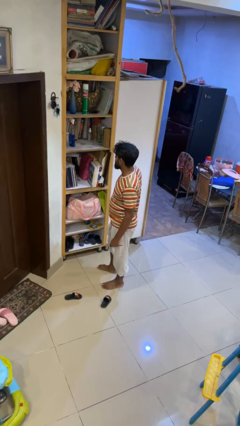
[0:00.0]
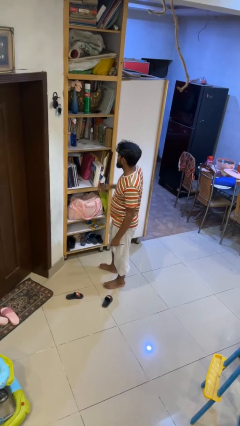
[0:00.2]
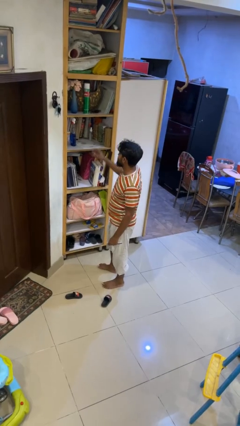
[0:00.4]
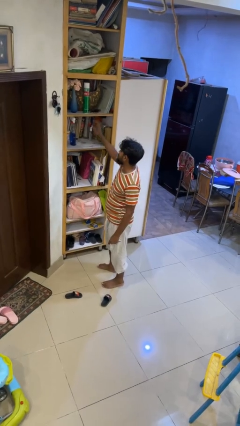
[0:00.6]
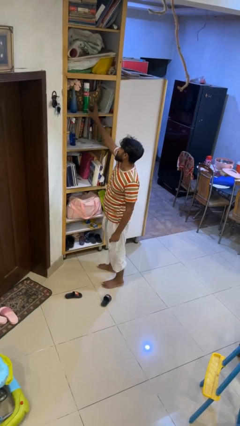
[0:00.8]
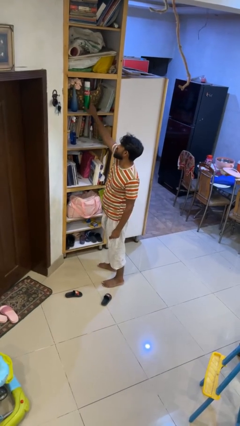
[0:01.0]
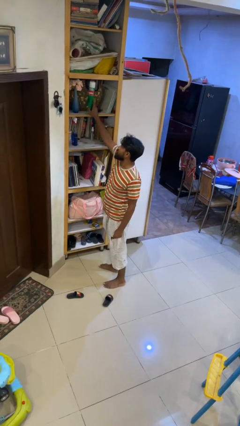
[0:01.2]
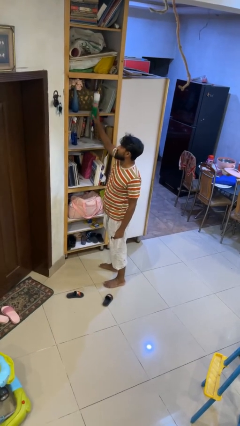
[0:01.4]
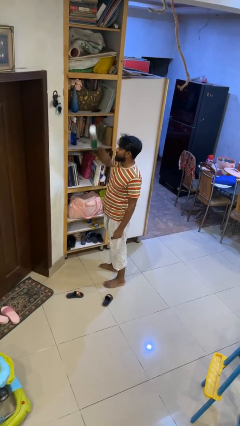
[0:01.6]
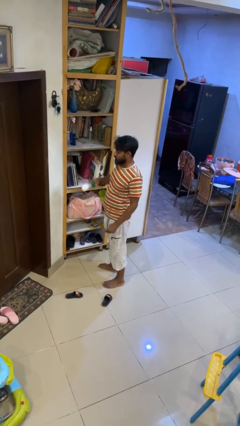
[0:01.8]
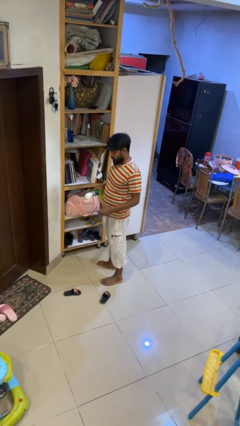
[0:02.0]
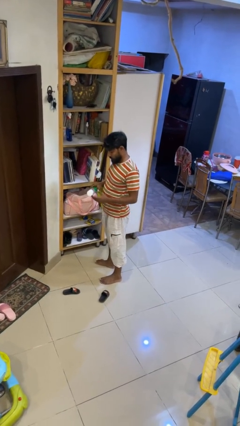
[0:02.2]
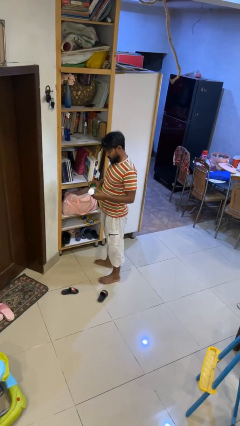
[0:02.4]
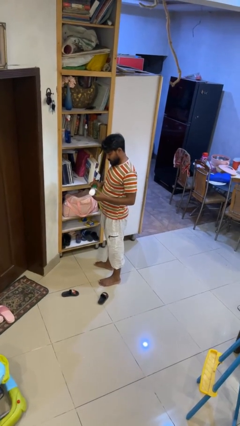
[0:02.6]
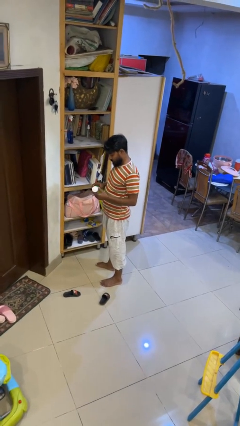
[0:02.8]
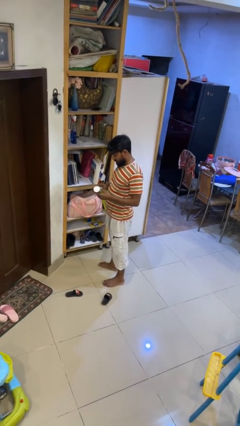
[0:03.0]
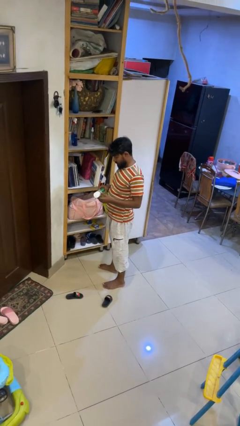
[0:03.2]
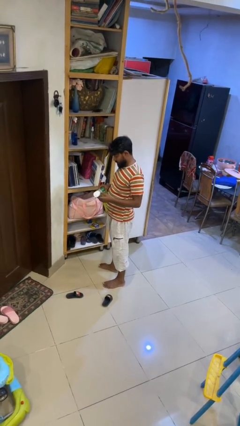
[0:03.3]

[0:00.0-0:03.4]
person picks up object from shelf

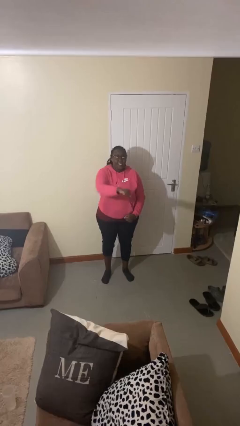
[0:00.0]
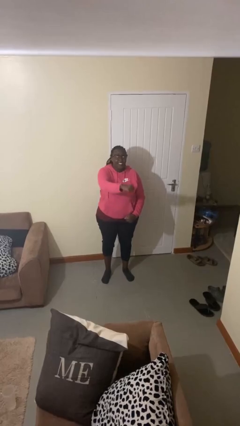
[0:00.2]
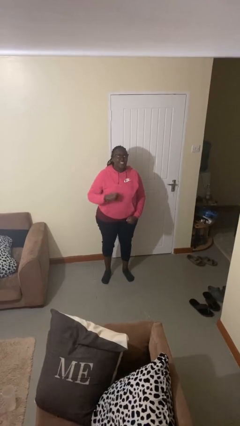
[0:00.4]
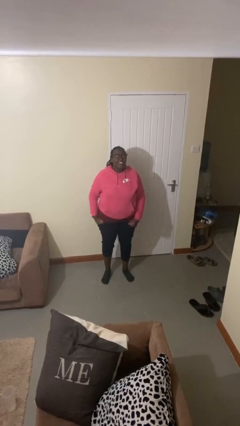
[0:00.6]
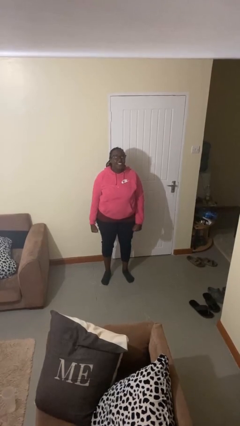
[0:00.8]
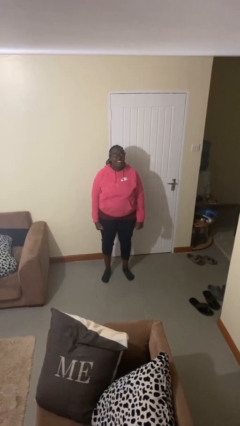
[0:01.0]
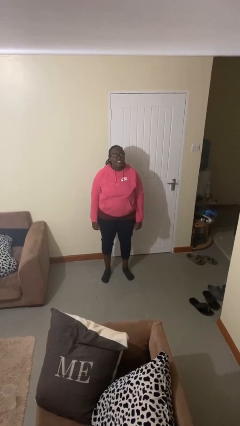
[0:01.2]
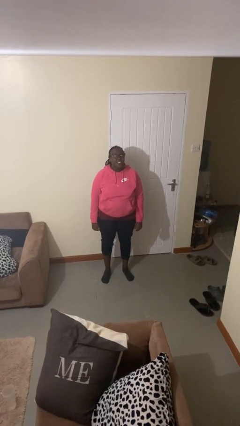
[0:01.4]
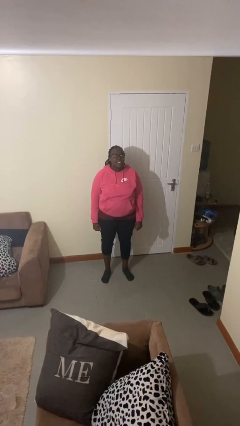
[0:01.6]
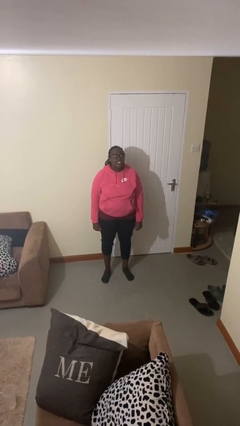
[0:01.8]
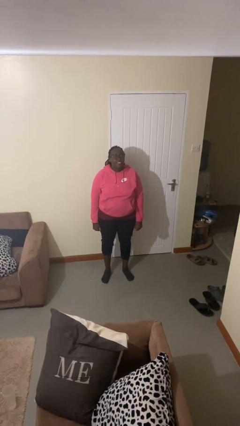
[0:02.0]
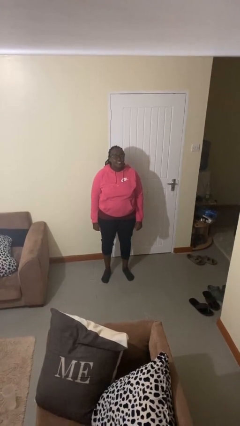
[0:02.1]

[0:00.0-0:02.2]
person punches

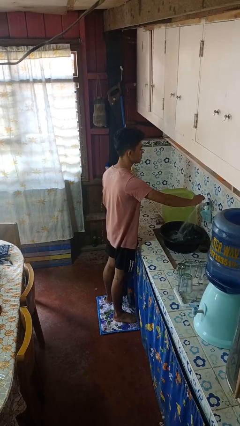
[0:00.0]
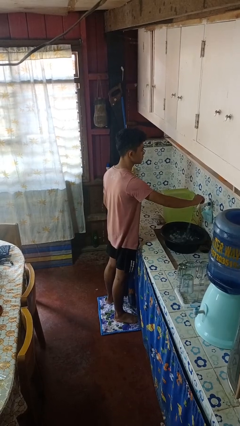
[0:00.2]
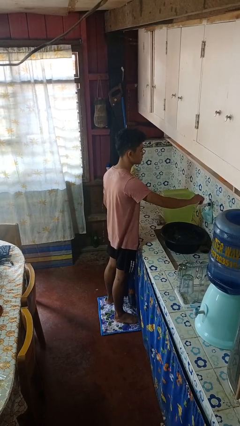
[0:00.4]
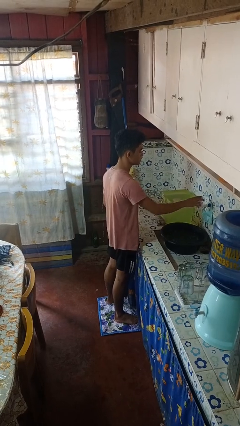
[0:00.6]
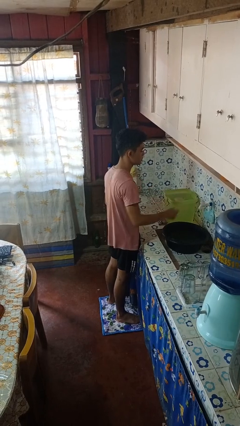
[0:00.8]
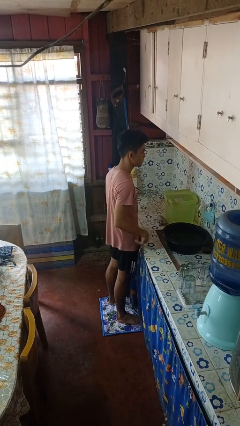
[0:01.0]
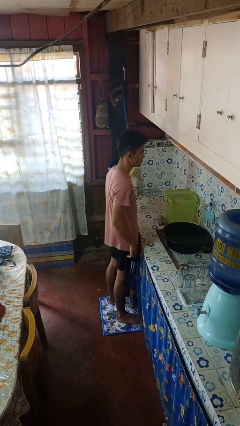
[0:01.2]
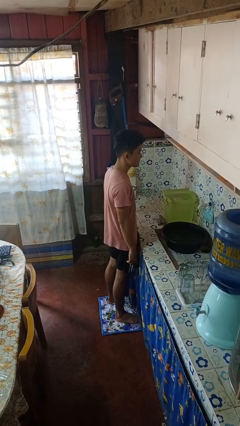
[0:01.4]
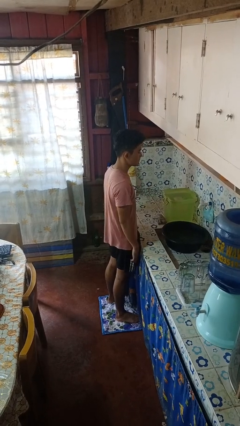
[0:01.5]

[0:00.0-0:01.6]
person turns off faucet

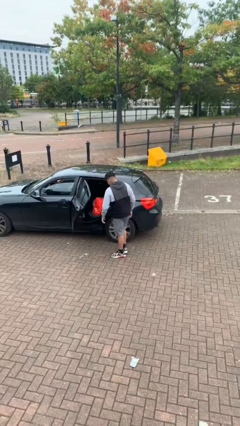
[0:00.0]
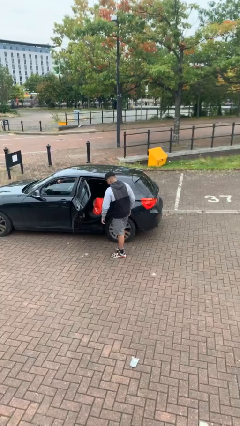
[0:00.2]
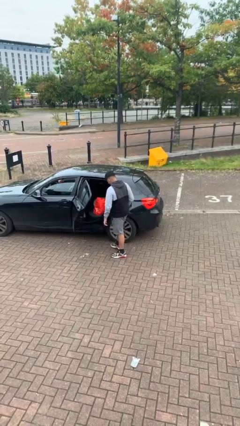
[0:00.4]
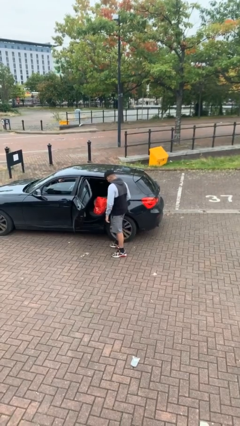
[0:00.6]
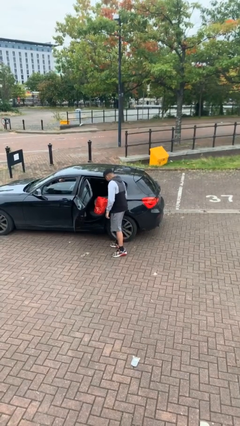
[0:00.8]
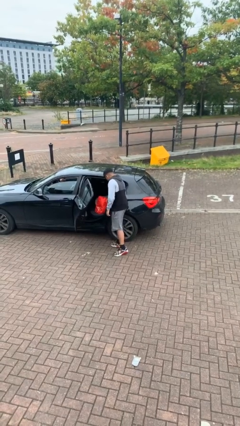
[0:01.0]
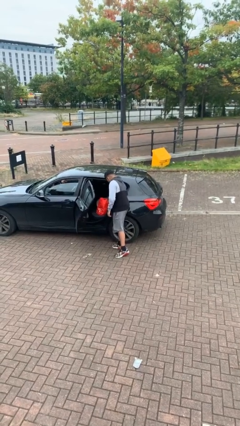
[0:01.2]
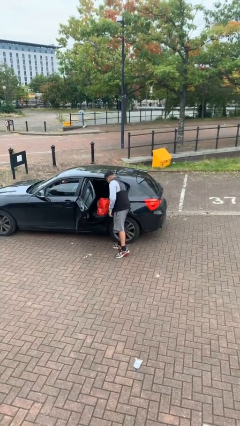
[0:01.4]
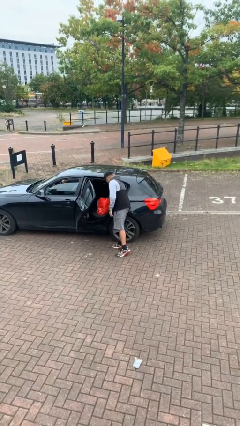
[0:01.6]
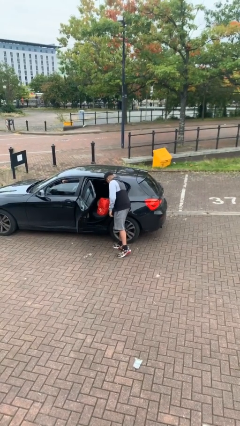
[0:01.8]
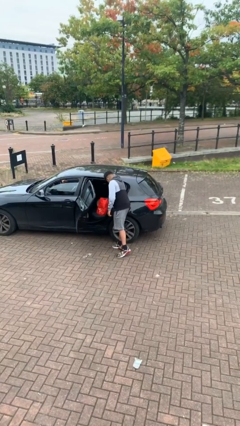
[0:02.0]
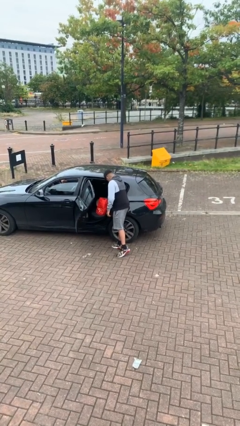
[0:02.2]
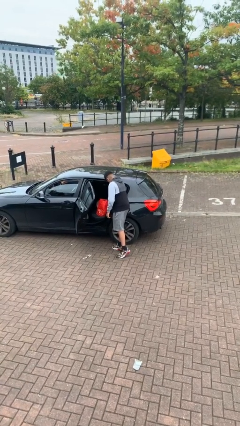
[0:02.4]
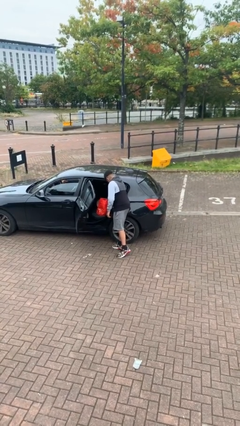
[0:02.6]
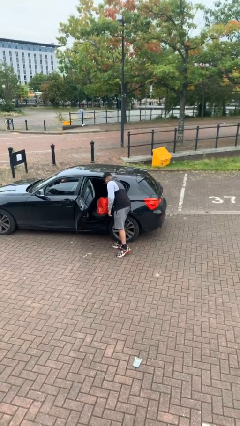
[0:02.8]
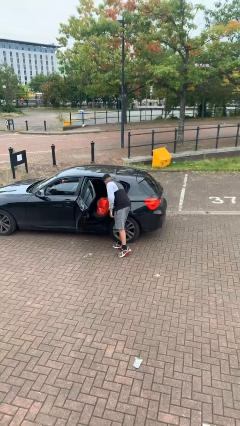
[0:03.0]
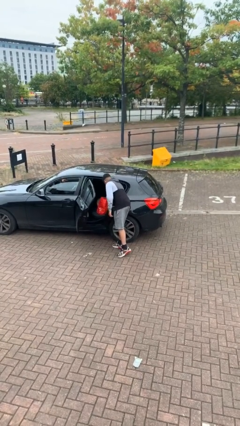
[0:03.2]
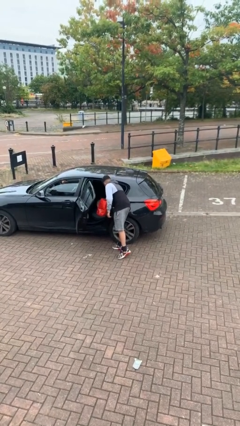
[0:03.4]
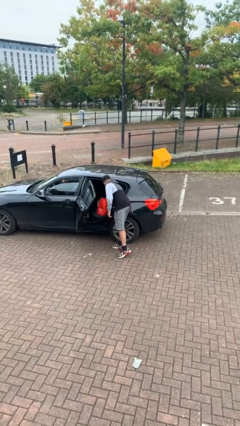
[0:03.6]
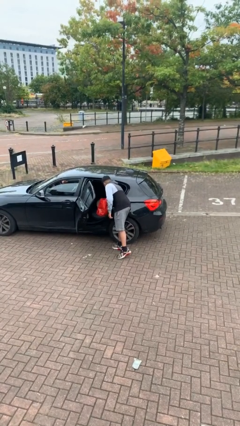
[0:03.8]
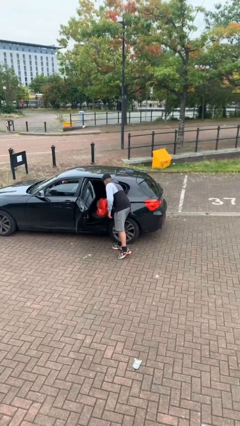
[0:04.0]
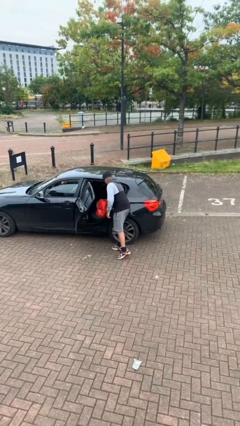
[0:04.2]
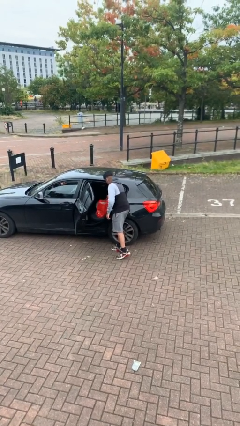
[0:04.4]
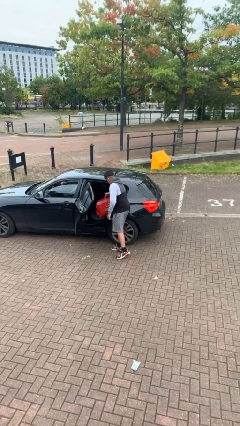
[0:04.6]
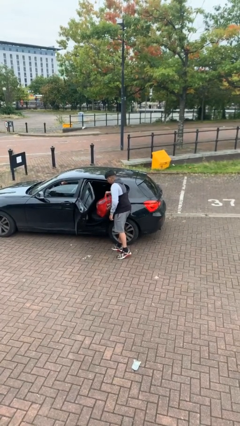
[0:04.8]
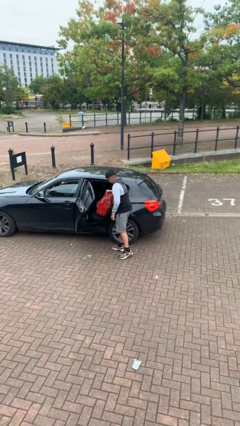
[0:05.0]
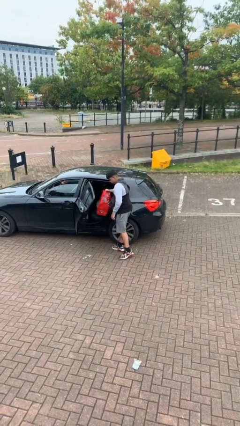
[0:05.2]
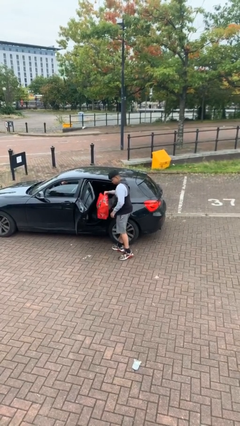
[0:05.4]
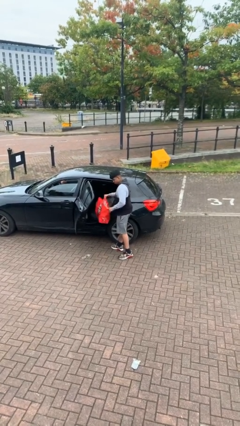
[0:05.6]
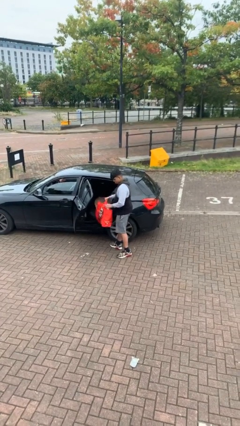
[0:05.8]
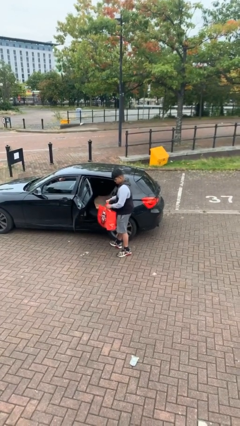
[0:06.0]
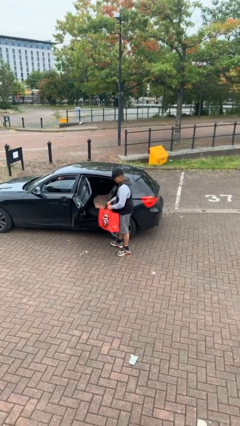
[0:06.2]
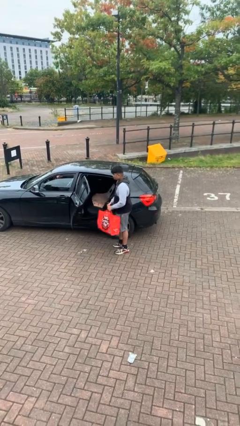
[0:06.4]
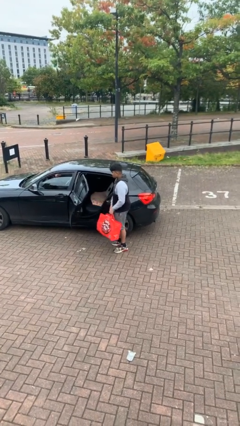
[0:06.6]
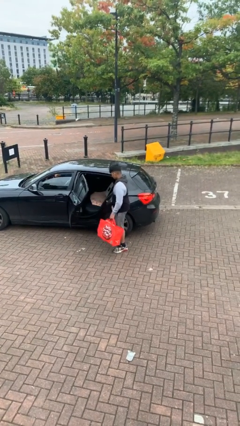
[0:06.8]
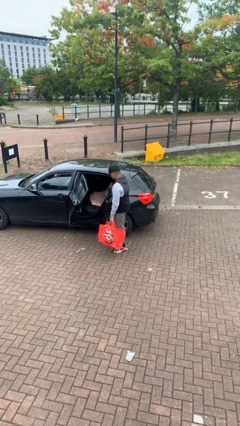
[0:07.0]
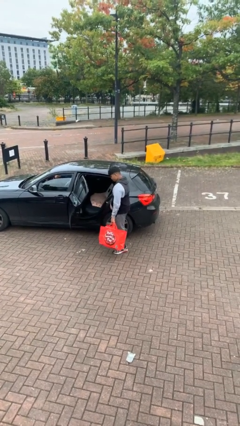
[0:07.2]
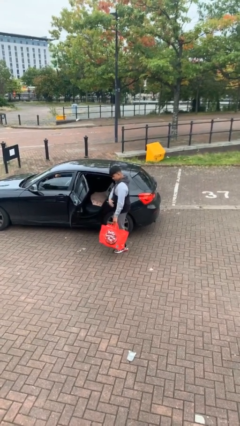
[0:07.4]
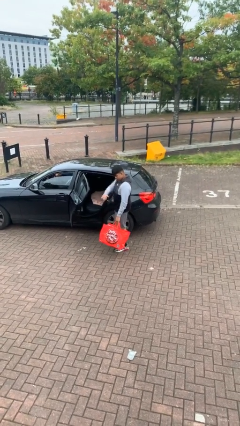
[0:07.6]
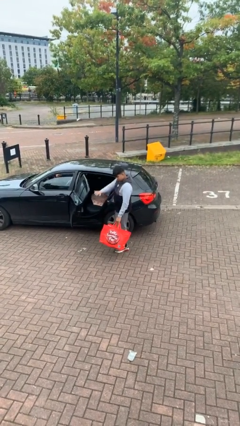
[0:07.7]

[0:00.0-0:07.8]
person unloads car

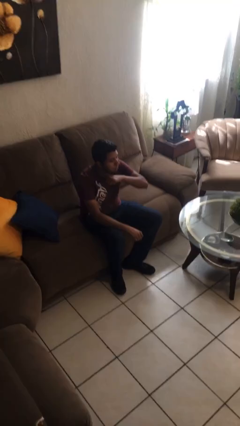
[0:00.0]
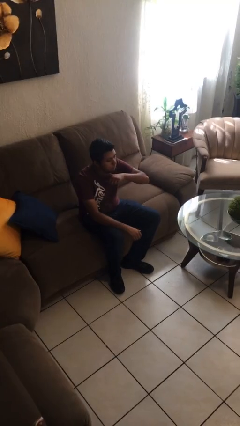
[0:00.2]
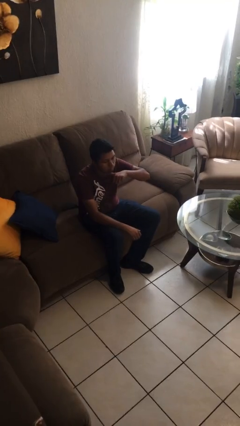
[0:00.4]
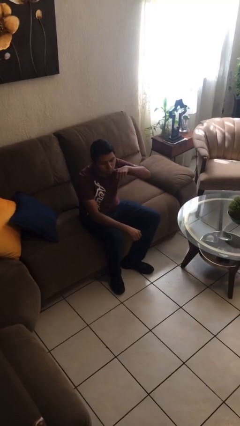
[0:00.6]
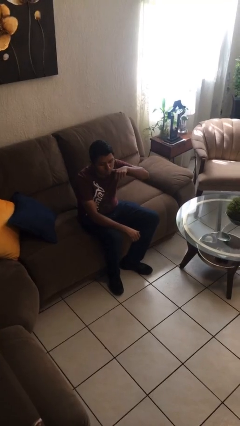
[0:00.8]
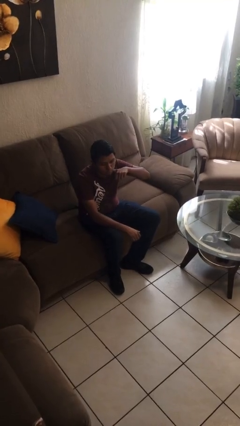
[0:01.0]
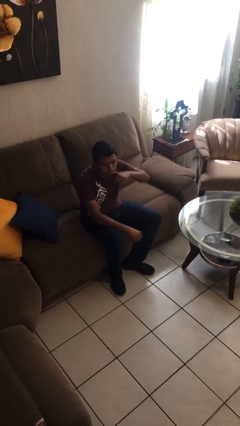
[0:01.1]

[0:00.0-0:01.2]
person gestures cut

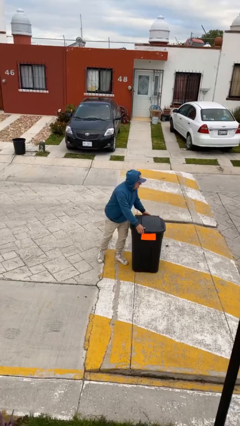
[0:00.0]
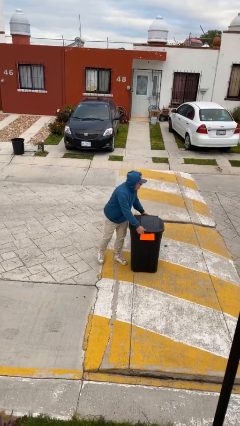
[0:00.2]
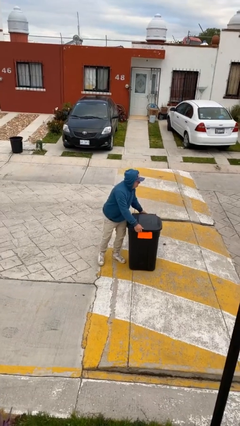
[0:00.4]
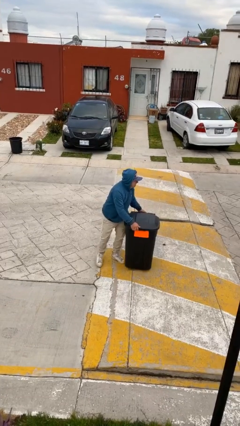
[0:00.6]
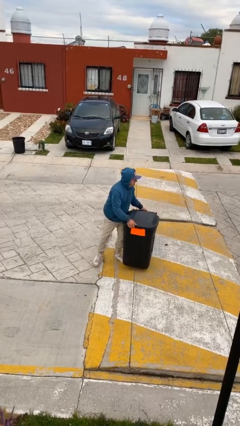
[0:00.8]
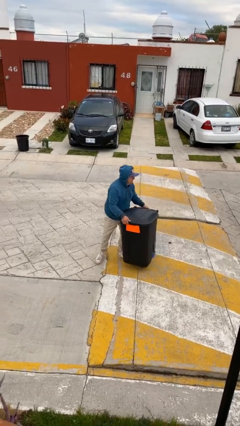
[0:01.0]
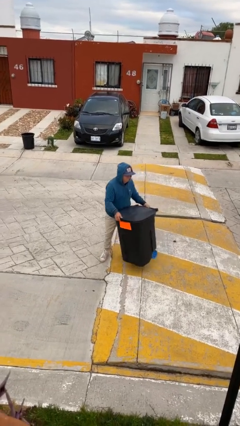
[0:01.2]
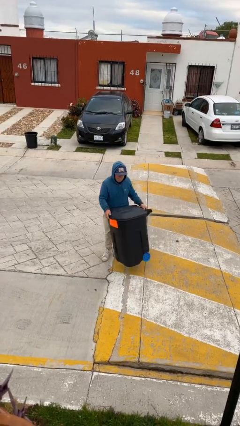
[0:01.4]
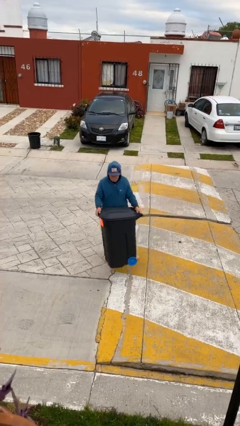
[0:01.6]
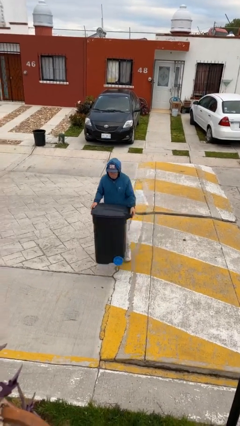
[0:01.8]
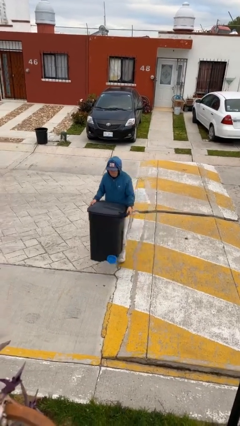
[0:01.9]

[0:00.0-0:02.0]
person picks up object from floor
